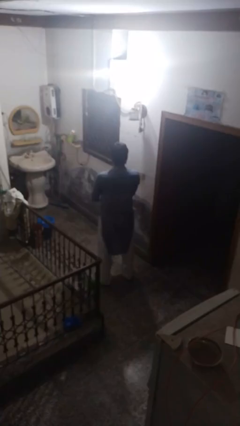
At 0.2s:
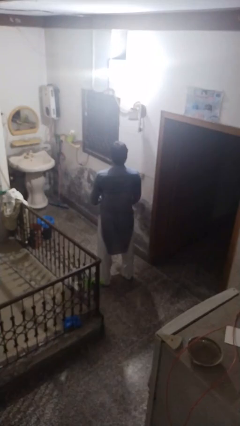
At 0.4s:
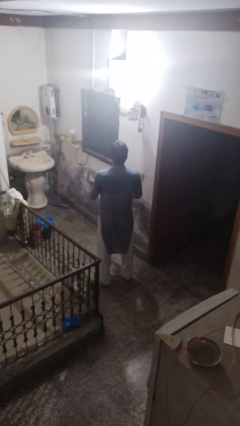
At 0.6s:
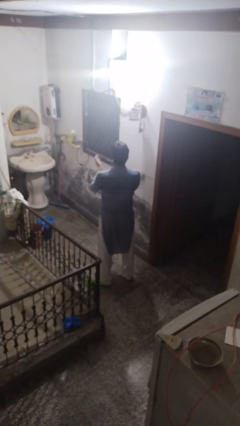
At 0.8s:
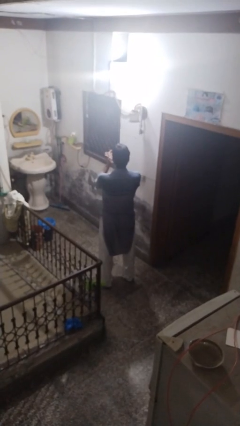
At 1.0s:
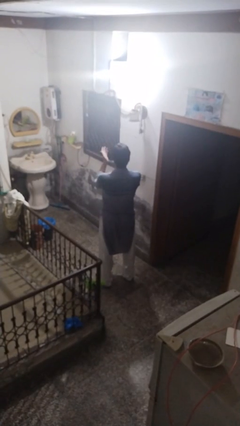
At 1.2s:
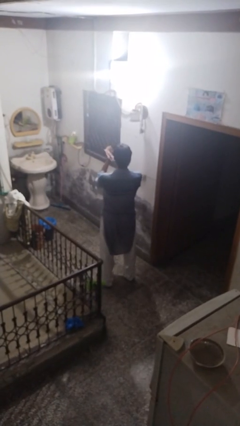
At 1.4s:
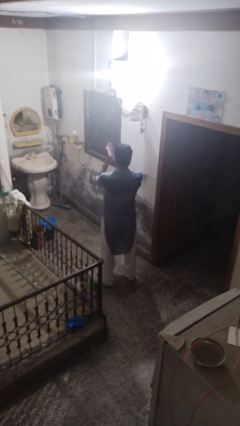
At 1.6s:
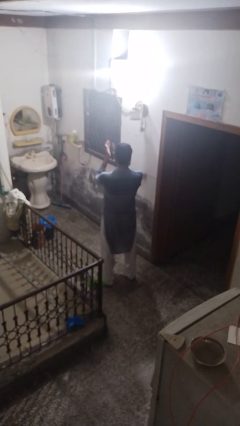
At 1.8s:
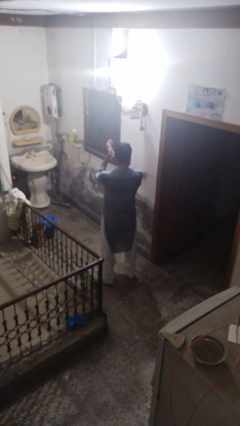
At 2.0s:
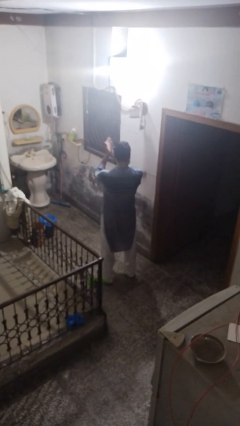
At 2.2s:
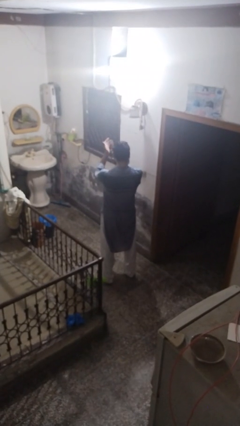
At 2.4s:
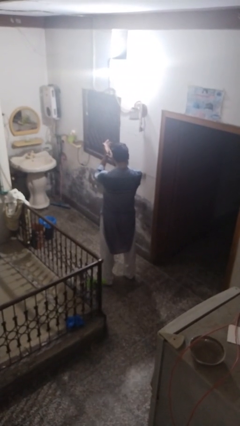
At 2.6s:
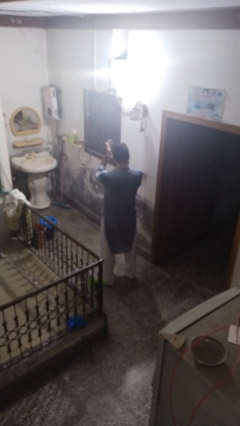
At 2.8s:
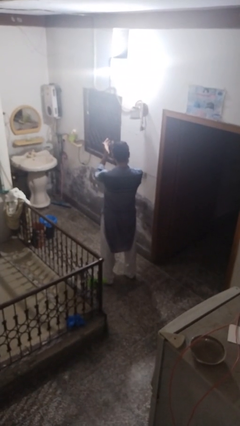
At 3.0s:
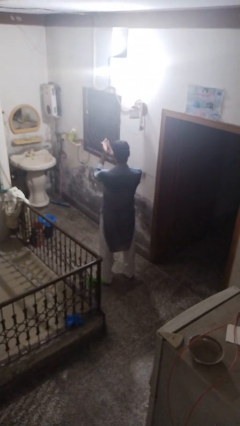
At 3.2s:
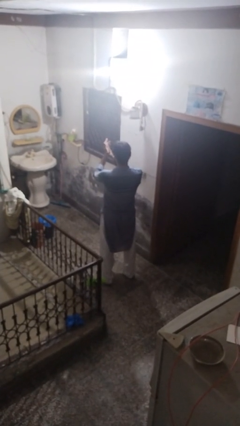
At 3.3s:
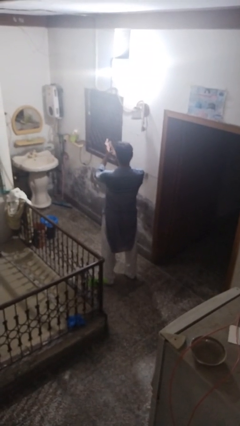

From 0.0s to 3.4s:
person claps hands

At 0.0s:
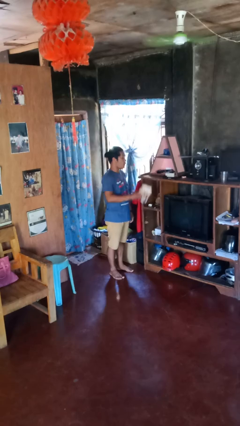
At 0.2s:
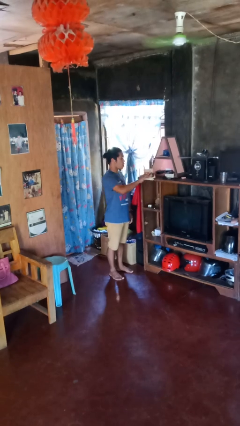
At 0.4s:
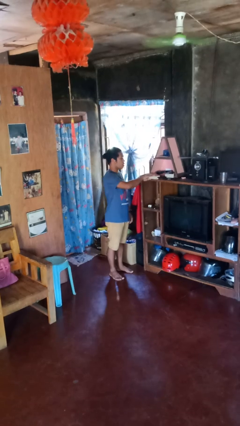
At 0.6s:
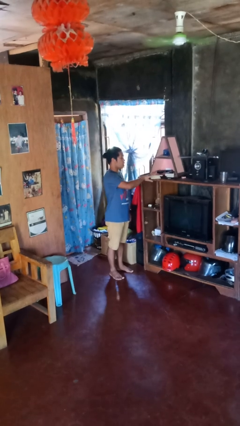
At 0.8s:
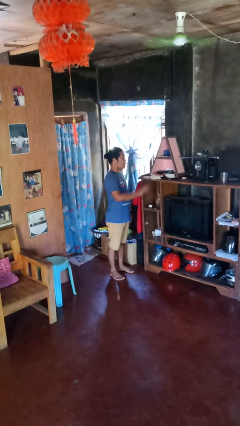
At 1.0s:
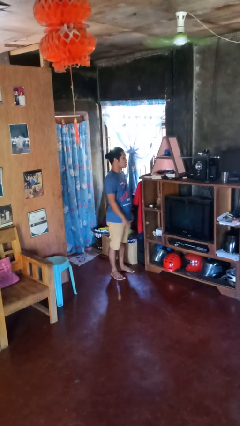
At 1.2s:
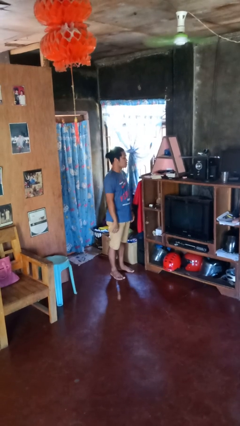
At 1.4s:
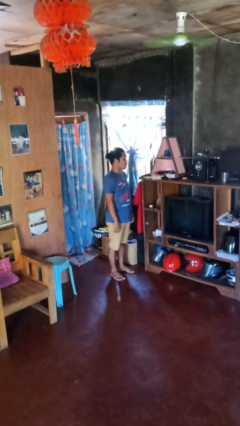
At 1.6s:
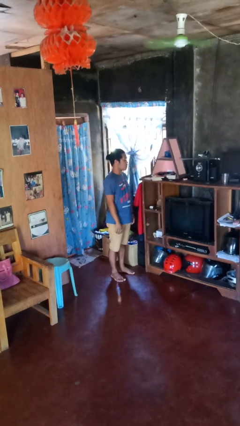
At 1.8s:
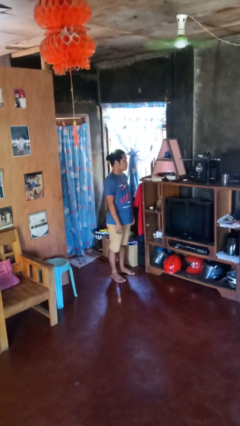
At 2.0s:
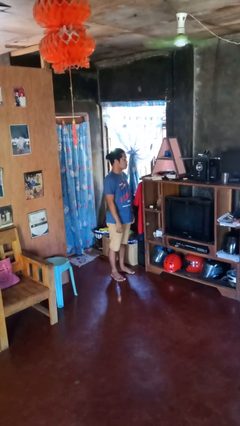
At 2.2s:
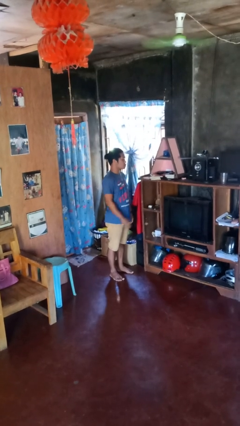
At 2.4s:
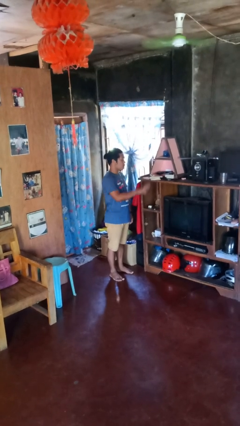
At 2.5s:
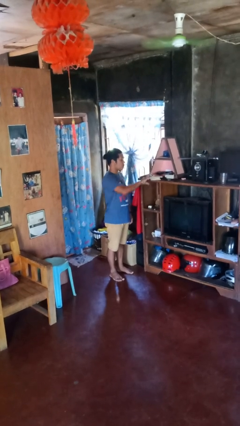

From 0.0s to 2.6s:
person puts down object on shelf

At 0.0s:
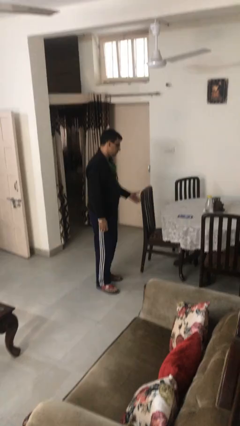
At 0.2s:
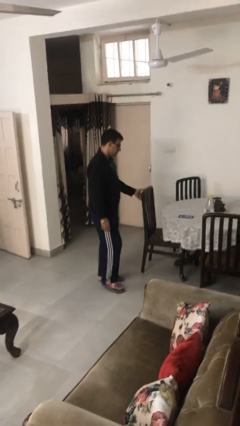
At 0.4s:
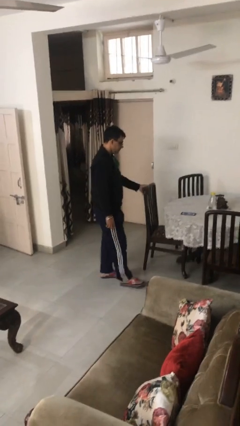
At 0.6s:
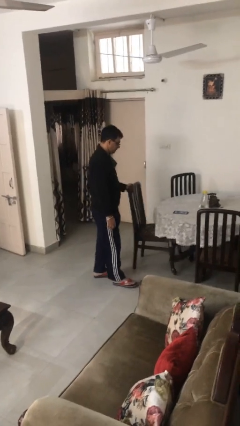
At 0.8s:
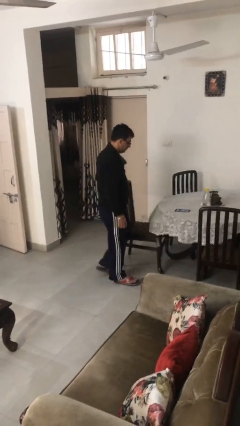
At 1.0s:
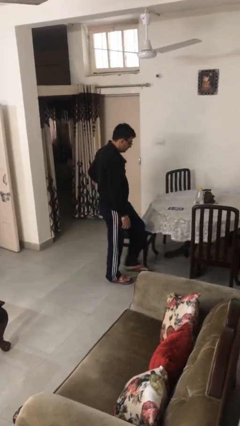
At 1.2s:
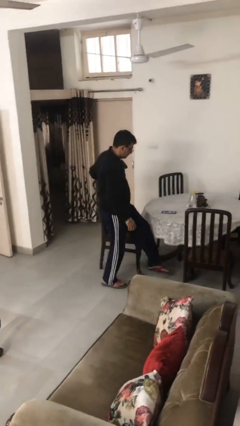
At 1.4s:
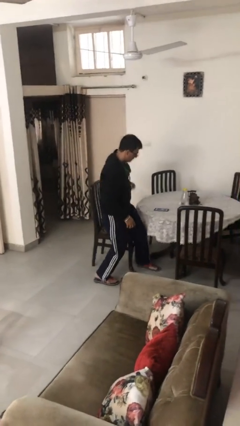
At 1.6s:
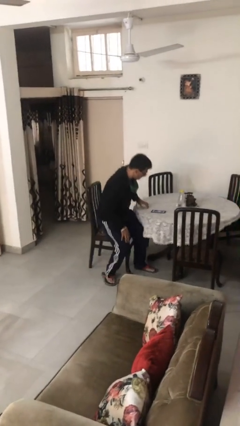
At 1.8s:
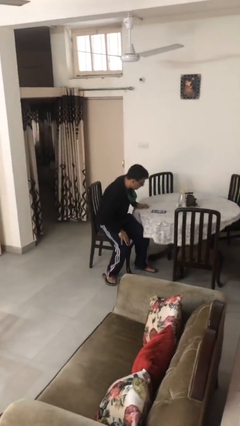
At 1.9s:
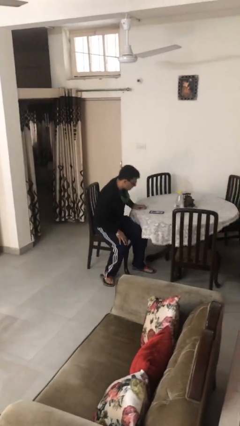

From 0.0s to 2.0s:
person sits down

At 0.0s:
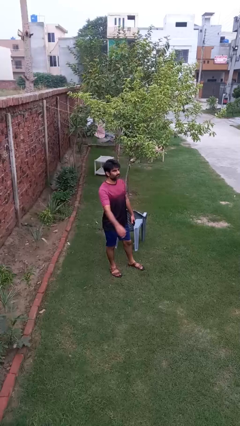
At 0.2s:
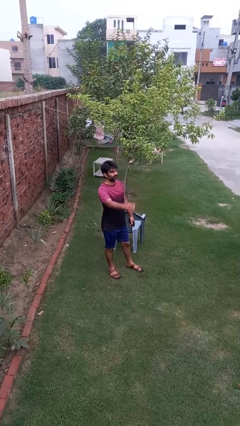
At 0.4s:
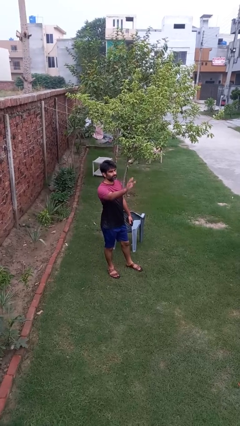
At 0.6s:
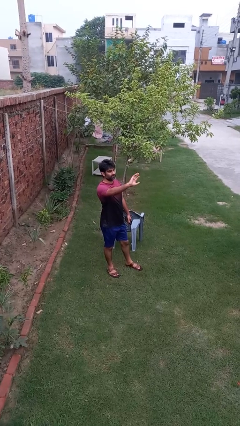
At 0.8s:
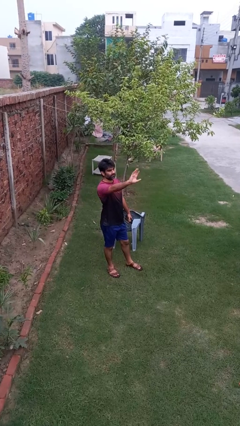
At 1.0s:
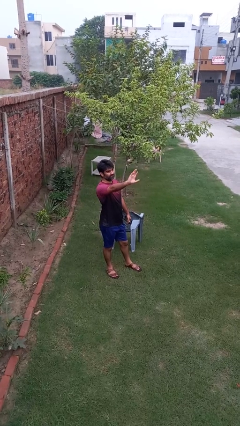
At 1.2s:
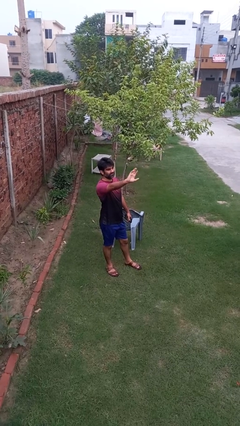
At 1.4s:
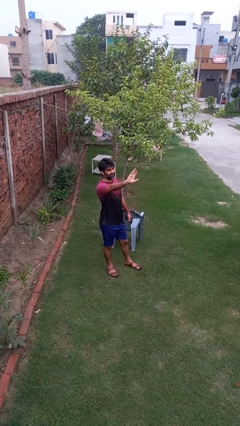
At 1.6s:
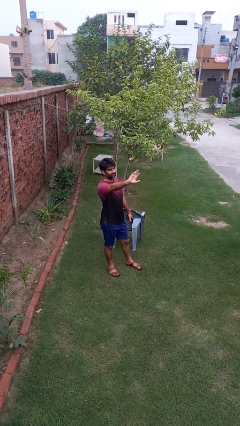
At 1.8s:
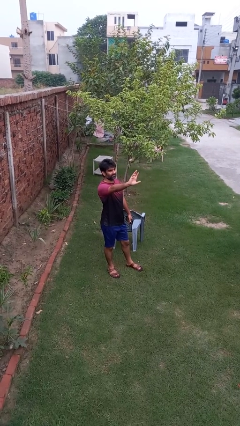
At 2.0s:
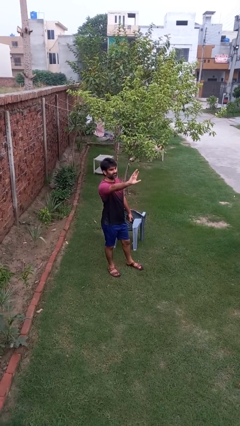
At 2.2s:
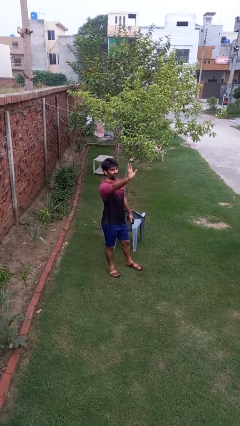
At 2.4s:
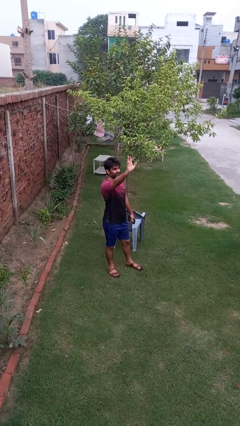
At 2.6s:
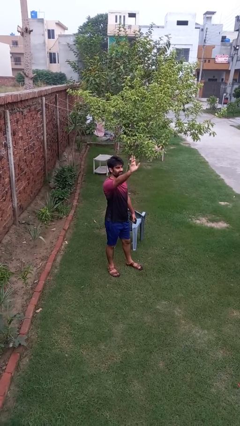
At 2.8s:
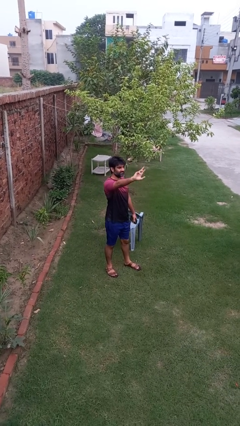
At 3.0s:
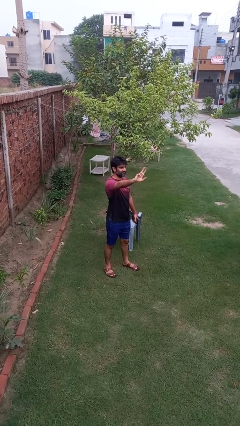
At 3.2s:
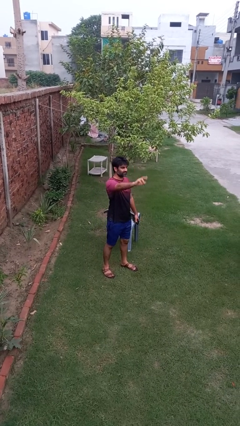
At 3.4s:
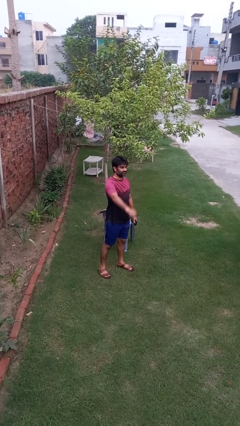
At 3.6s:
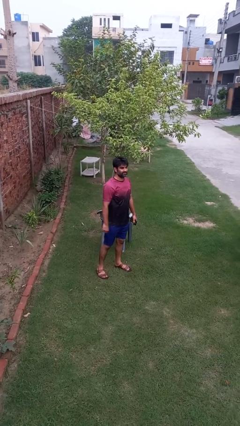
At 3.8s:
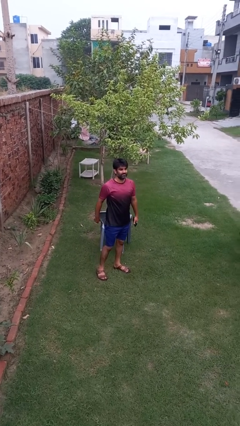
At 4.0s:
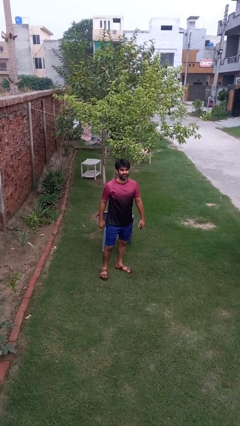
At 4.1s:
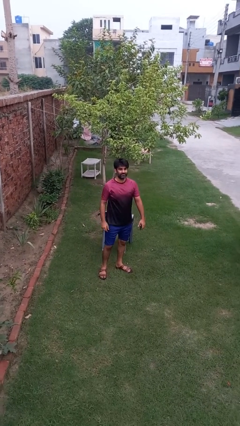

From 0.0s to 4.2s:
person waves at person

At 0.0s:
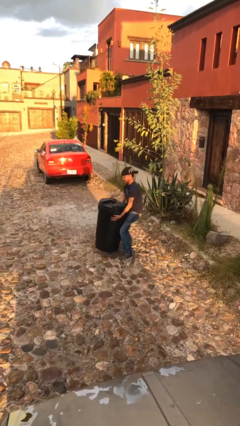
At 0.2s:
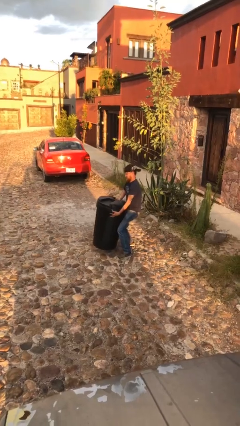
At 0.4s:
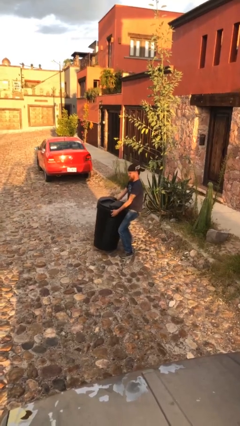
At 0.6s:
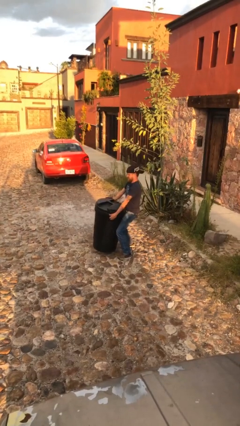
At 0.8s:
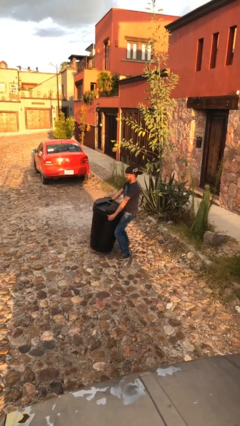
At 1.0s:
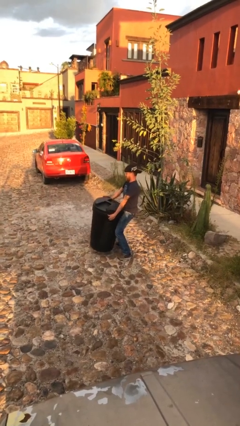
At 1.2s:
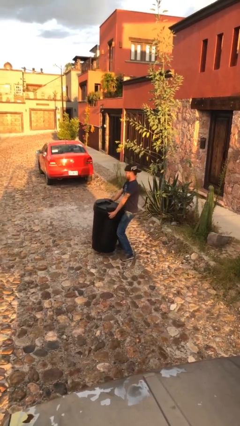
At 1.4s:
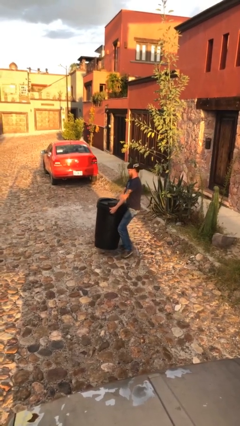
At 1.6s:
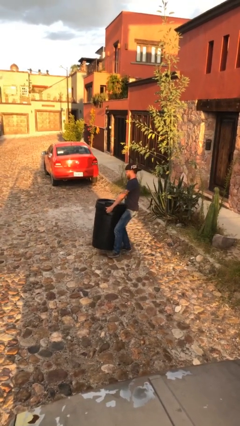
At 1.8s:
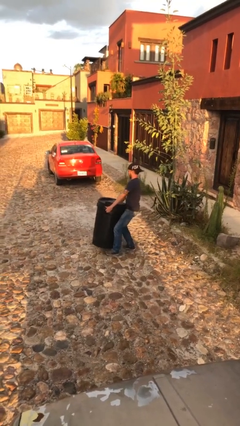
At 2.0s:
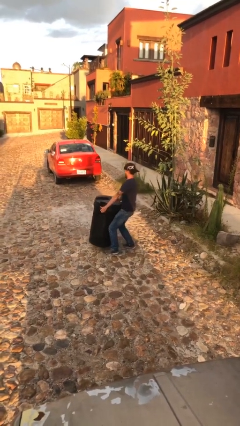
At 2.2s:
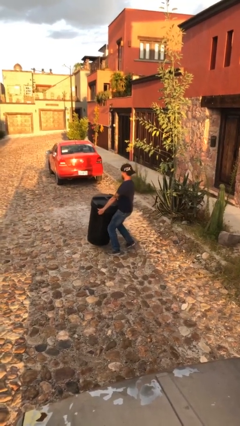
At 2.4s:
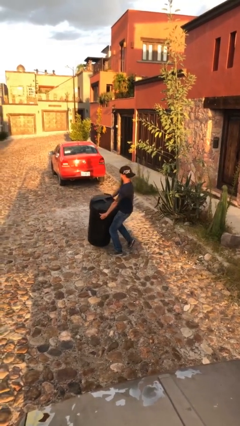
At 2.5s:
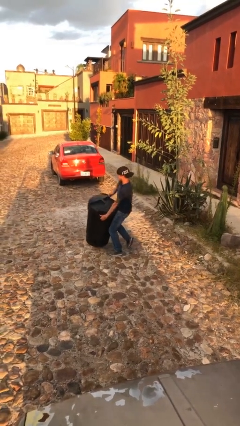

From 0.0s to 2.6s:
person carries heavy object

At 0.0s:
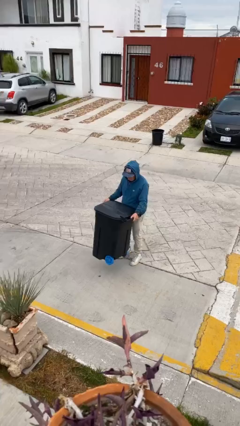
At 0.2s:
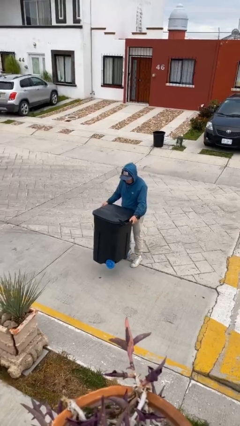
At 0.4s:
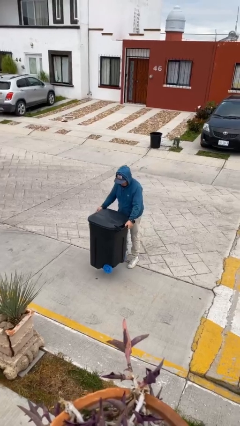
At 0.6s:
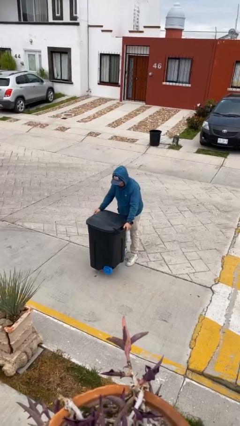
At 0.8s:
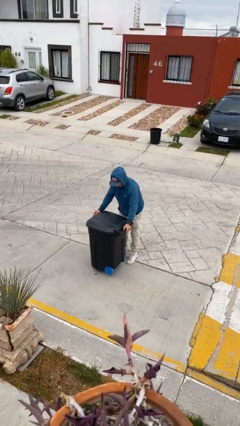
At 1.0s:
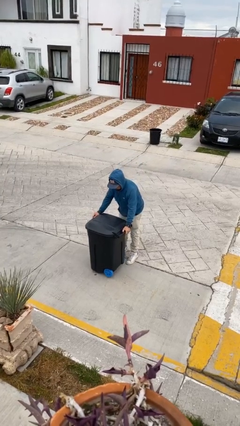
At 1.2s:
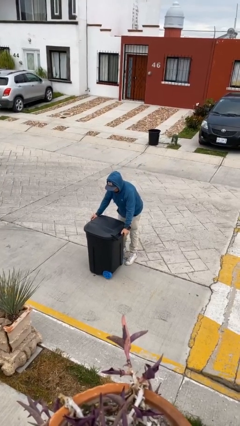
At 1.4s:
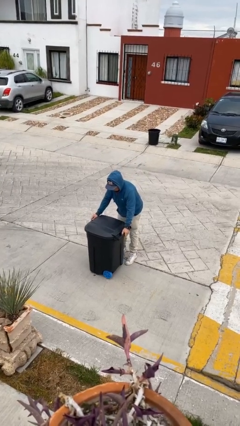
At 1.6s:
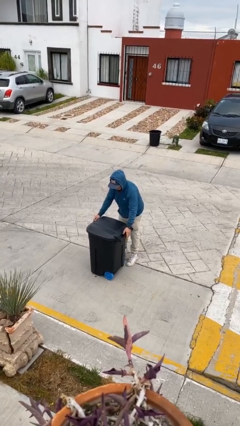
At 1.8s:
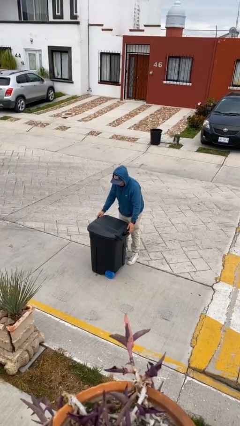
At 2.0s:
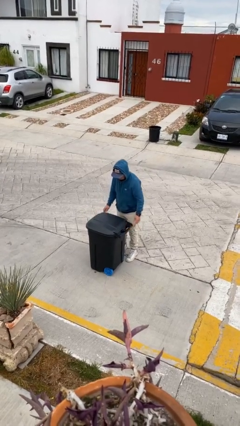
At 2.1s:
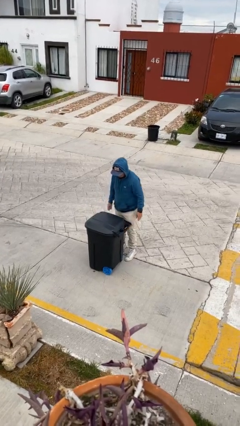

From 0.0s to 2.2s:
person puts down object on floor
